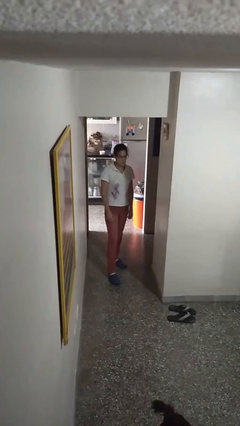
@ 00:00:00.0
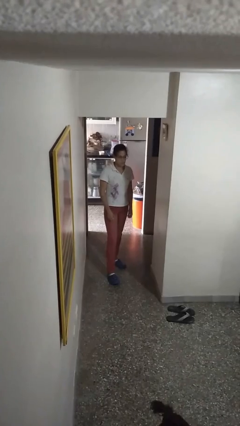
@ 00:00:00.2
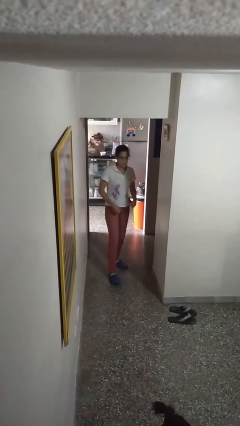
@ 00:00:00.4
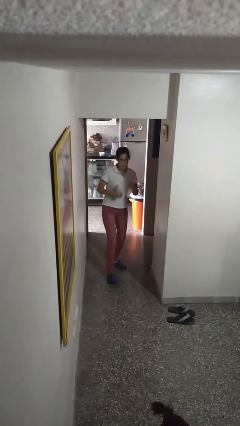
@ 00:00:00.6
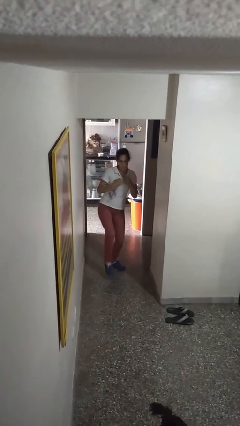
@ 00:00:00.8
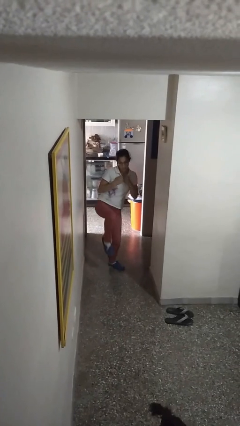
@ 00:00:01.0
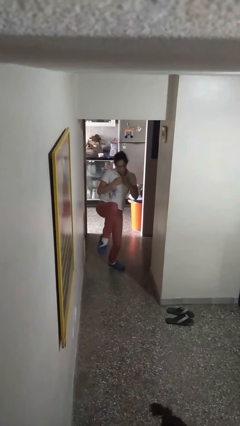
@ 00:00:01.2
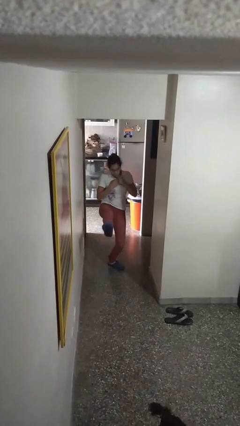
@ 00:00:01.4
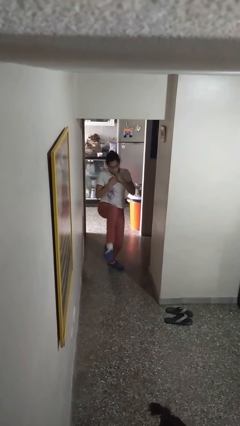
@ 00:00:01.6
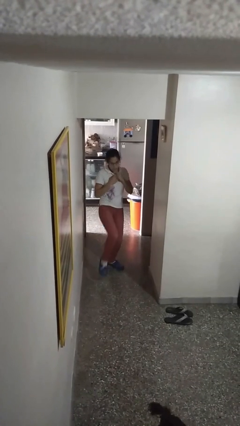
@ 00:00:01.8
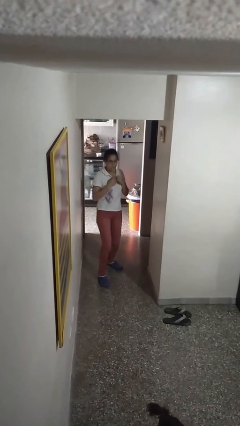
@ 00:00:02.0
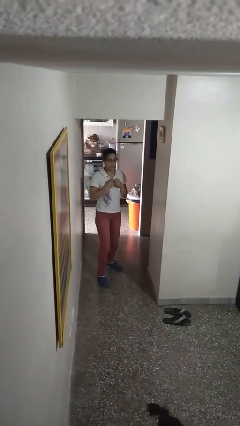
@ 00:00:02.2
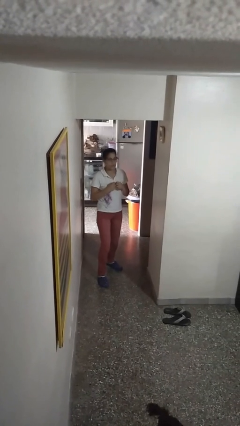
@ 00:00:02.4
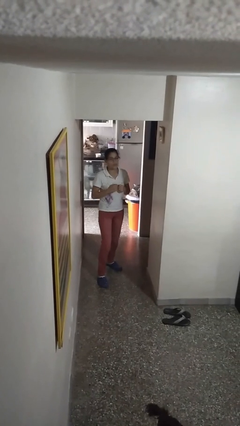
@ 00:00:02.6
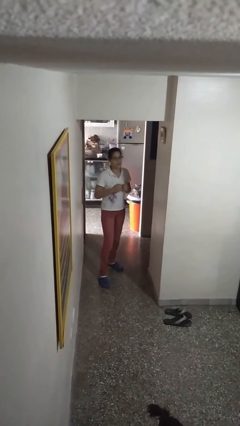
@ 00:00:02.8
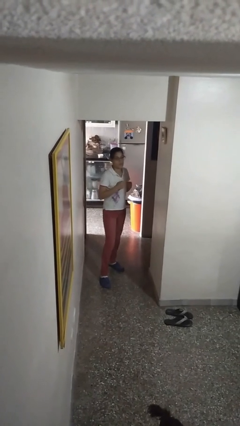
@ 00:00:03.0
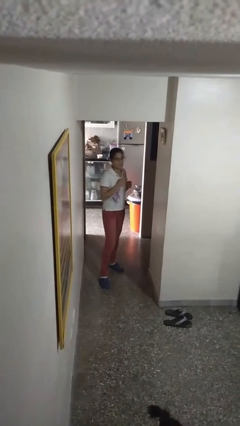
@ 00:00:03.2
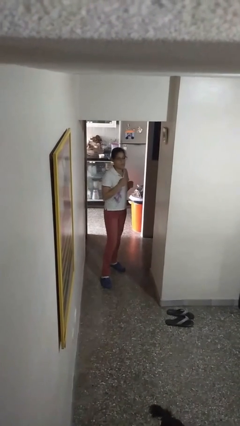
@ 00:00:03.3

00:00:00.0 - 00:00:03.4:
person karate kicks

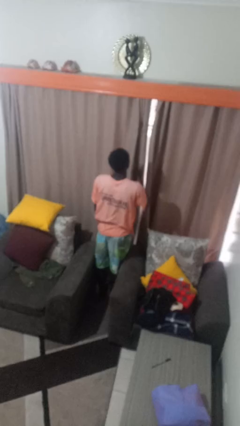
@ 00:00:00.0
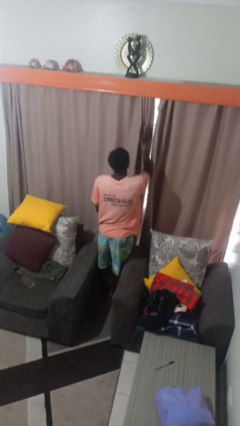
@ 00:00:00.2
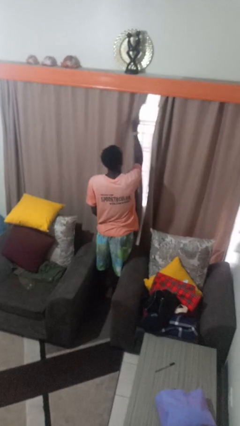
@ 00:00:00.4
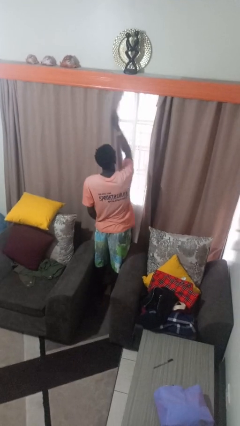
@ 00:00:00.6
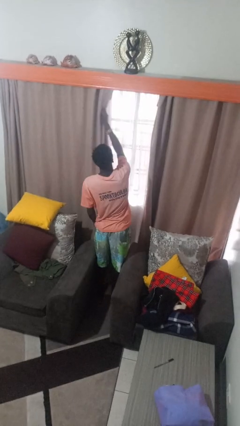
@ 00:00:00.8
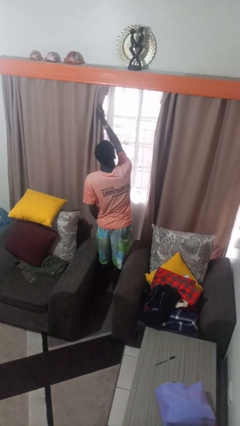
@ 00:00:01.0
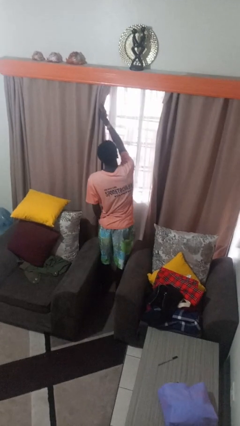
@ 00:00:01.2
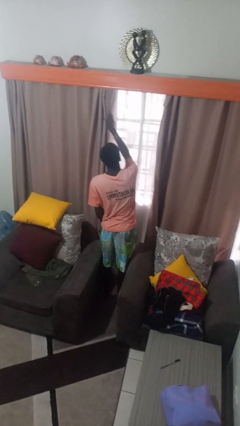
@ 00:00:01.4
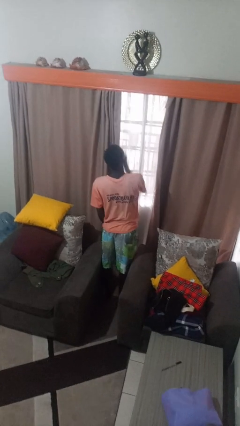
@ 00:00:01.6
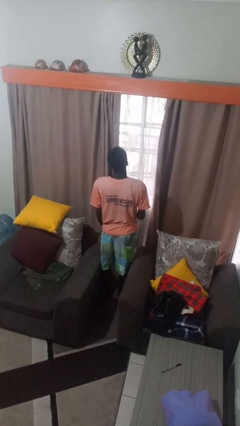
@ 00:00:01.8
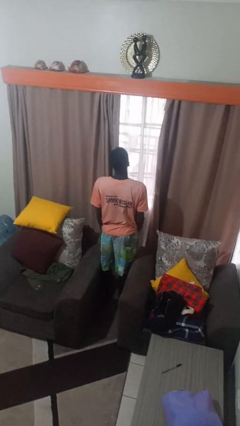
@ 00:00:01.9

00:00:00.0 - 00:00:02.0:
person opens curtains

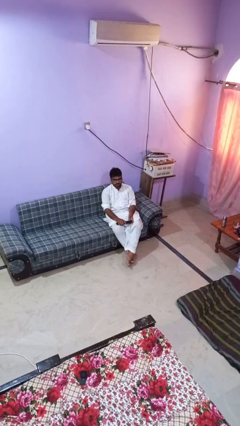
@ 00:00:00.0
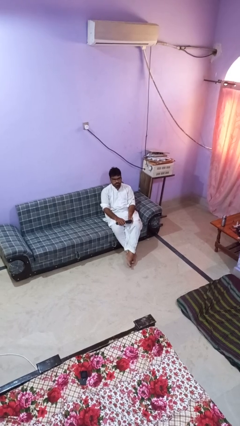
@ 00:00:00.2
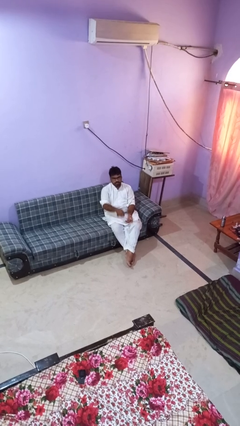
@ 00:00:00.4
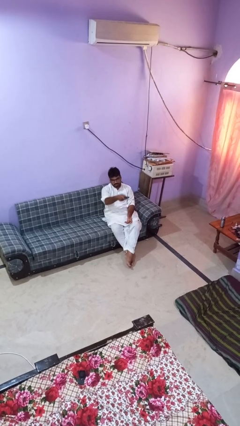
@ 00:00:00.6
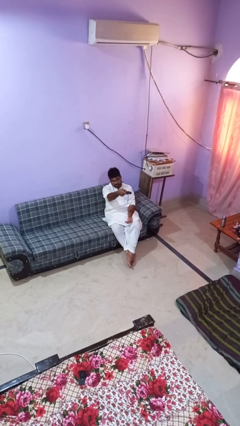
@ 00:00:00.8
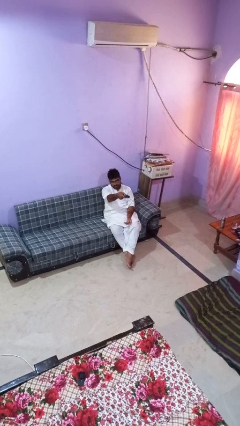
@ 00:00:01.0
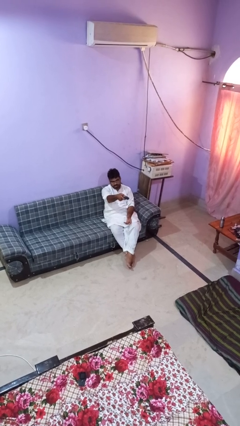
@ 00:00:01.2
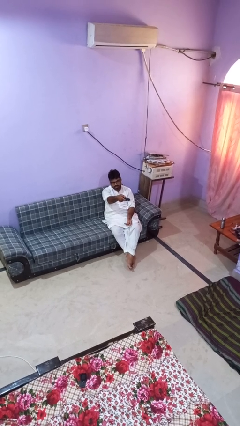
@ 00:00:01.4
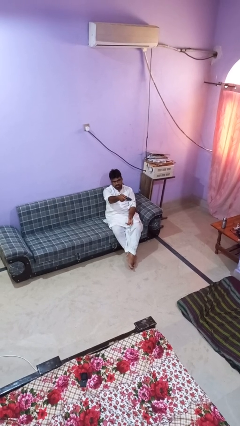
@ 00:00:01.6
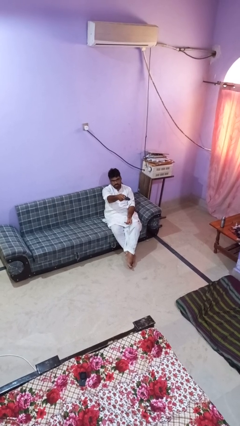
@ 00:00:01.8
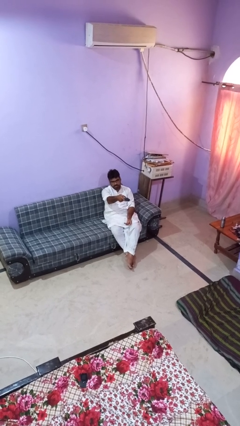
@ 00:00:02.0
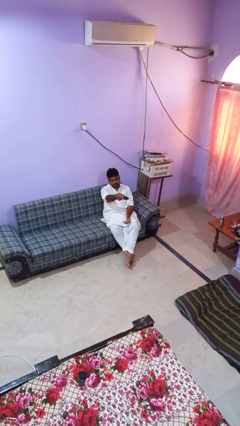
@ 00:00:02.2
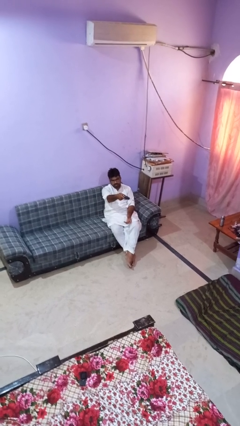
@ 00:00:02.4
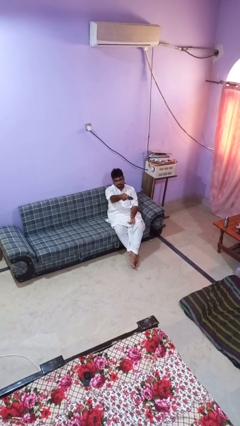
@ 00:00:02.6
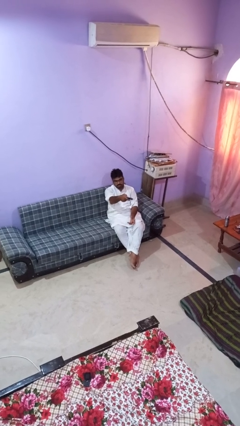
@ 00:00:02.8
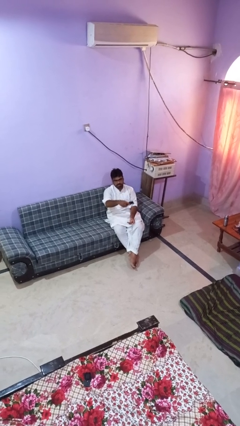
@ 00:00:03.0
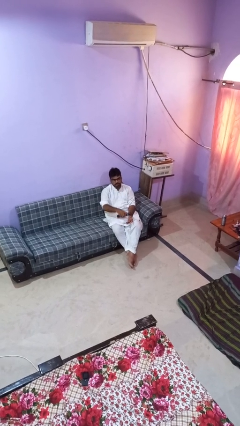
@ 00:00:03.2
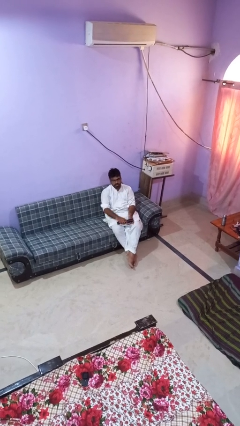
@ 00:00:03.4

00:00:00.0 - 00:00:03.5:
person uses television remote

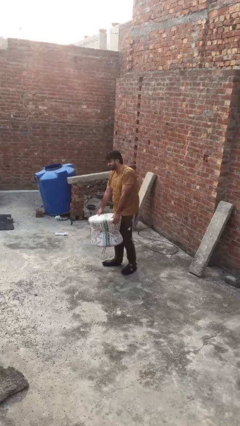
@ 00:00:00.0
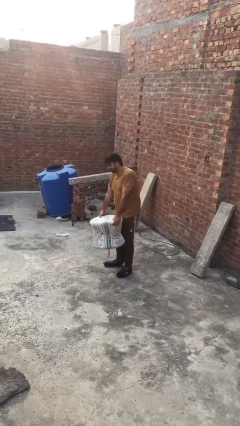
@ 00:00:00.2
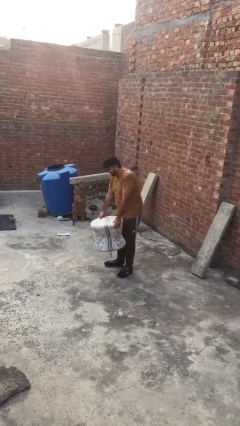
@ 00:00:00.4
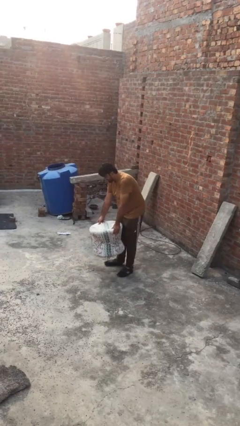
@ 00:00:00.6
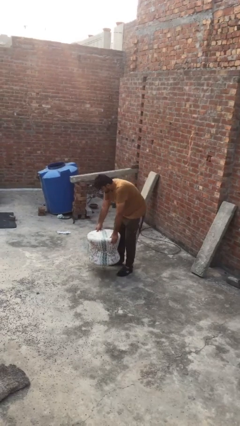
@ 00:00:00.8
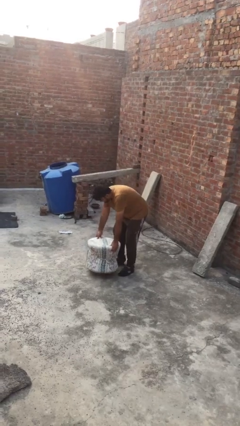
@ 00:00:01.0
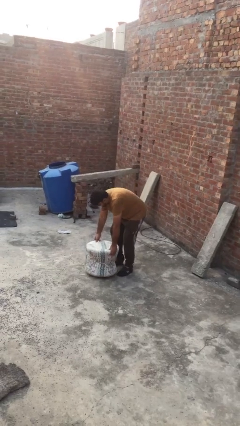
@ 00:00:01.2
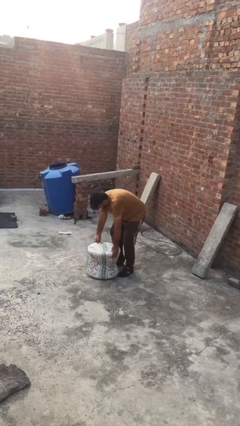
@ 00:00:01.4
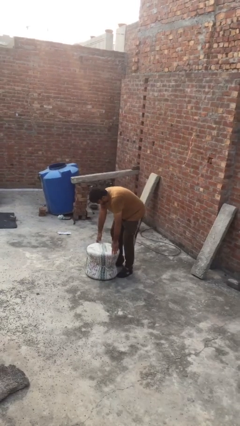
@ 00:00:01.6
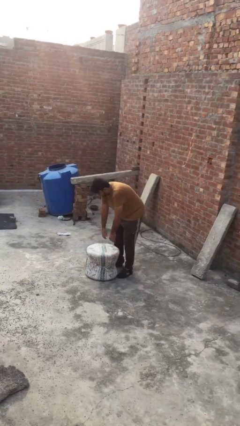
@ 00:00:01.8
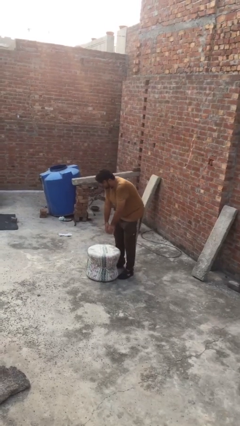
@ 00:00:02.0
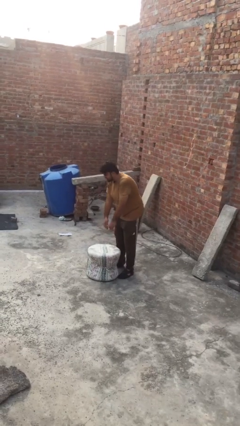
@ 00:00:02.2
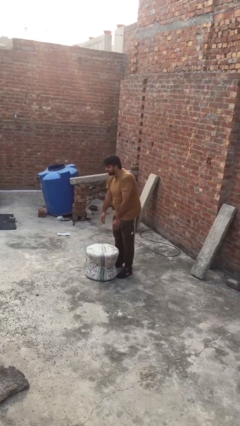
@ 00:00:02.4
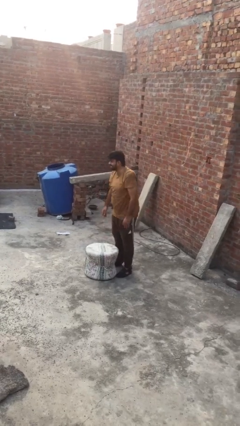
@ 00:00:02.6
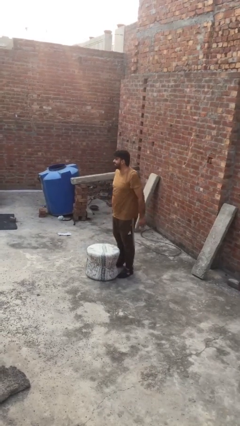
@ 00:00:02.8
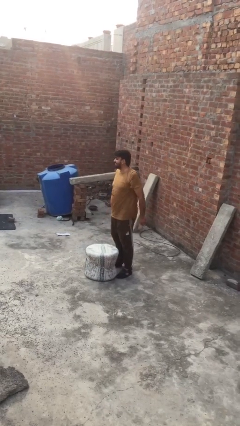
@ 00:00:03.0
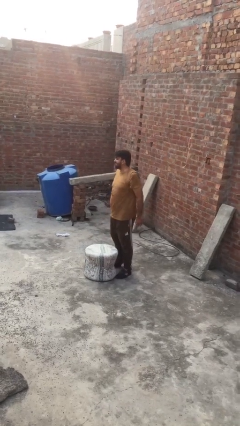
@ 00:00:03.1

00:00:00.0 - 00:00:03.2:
person puts down object on floor

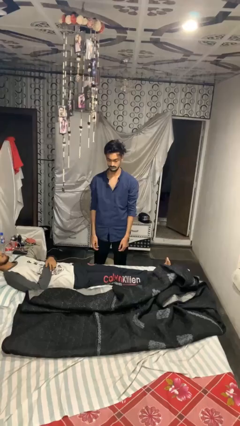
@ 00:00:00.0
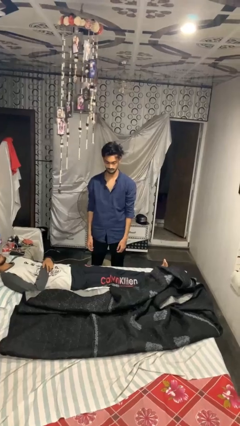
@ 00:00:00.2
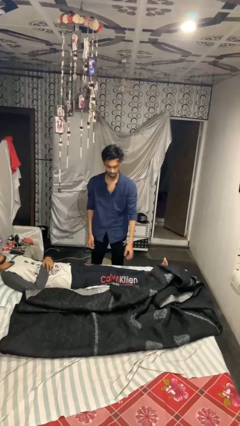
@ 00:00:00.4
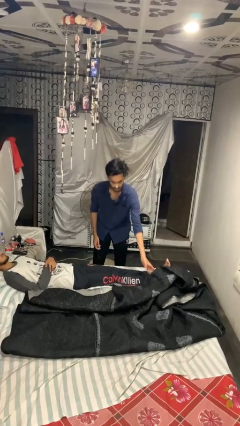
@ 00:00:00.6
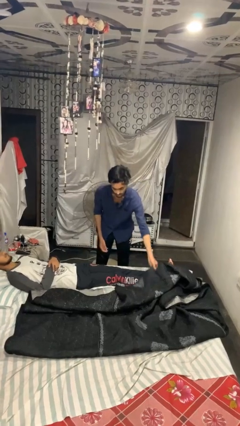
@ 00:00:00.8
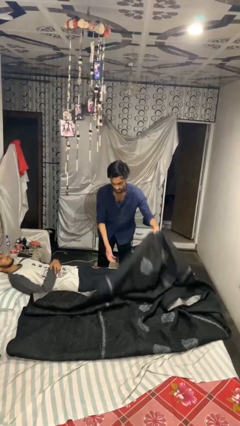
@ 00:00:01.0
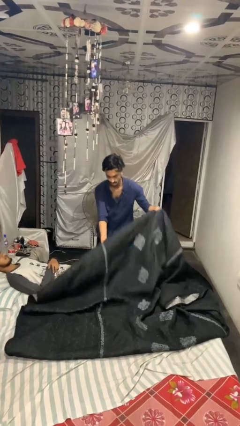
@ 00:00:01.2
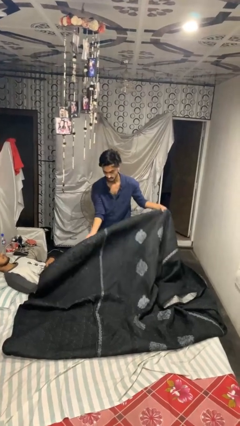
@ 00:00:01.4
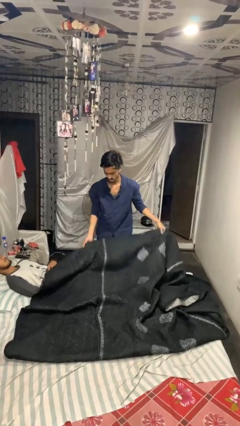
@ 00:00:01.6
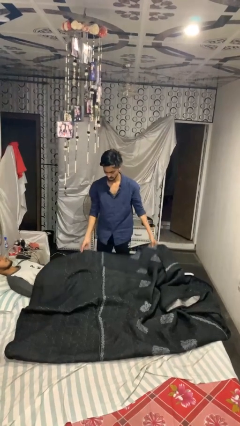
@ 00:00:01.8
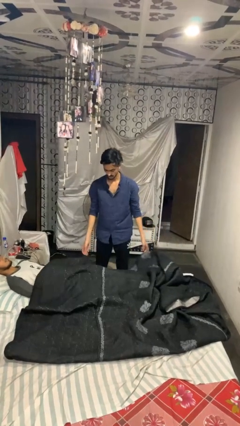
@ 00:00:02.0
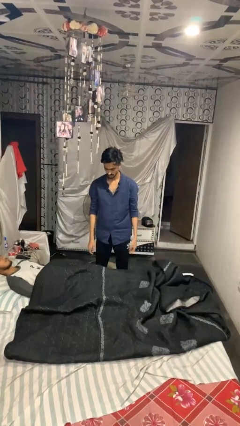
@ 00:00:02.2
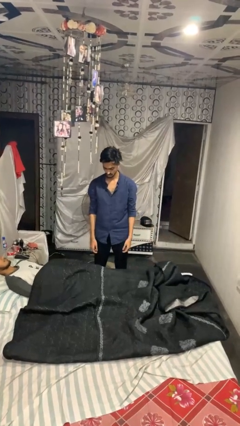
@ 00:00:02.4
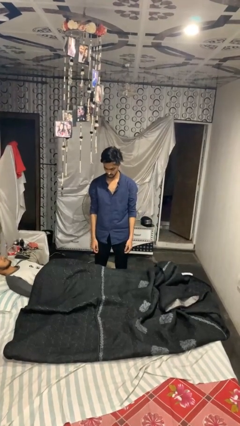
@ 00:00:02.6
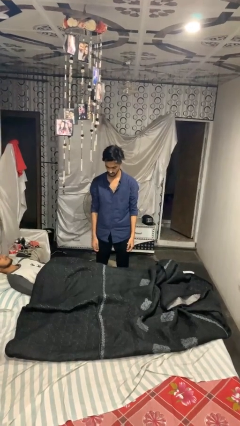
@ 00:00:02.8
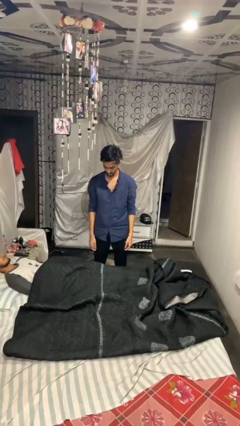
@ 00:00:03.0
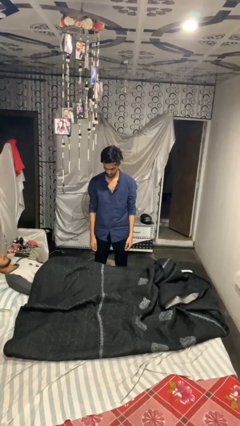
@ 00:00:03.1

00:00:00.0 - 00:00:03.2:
person covers friend with blanket

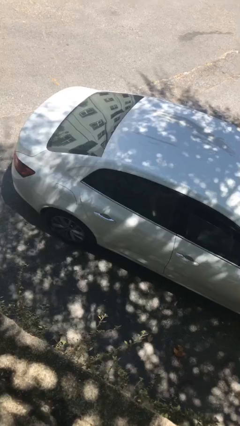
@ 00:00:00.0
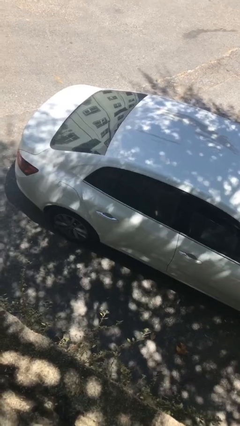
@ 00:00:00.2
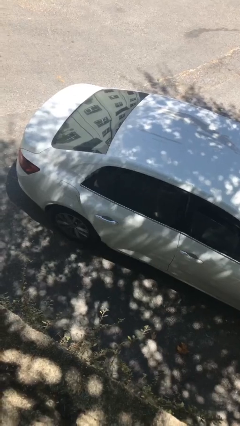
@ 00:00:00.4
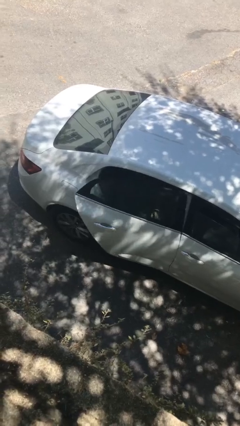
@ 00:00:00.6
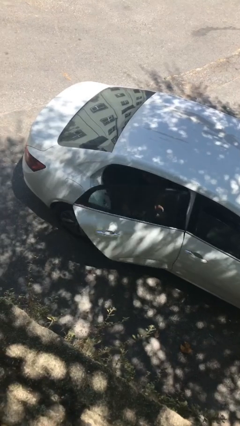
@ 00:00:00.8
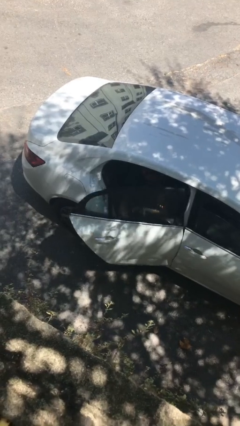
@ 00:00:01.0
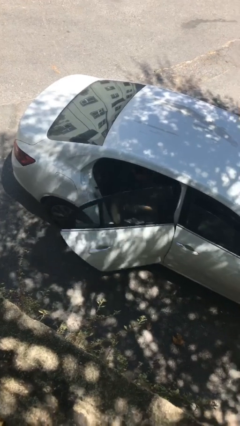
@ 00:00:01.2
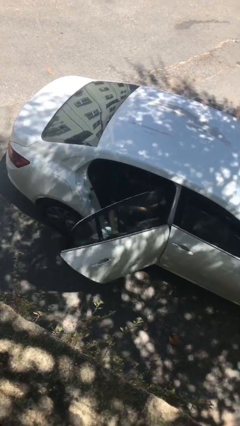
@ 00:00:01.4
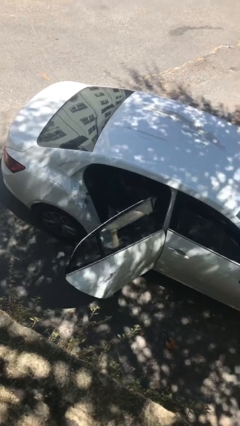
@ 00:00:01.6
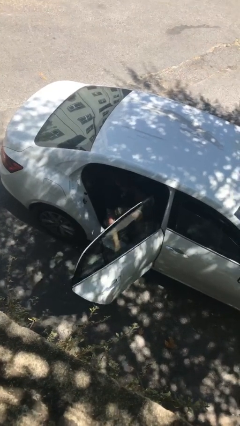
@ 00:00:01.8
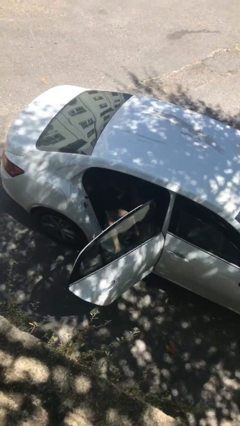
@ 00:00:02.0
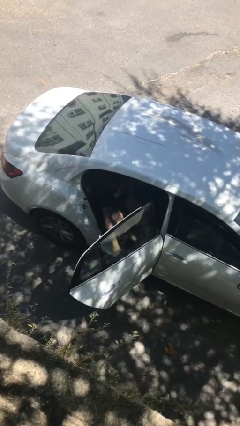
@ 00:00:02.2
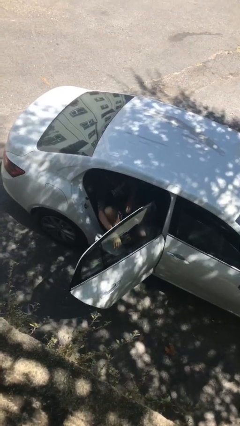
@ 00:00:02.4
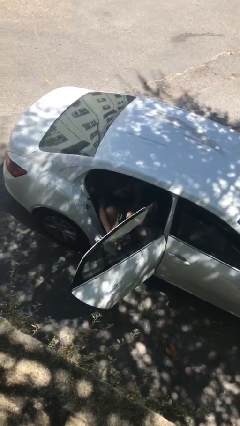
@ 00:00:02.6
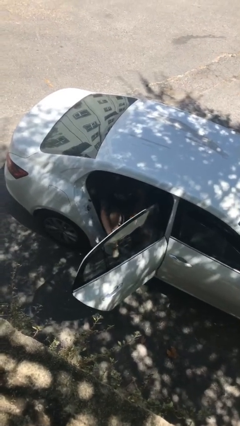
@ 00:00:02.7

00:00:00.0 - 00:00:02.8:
person opens car door
